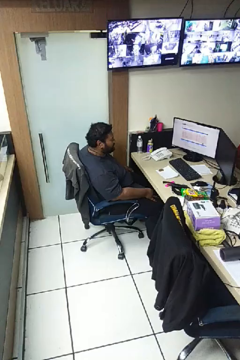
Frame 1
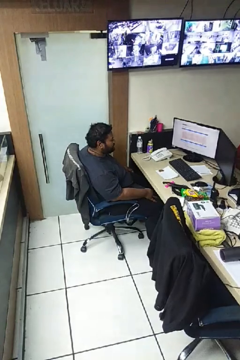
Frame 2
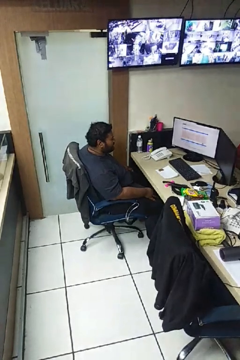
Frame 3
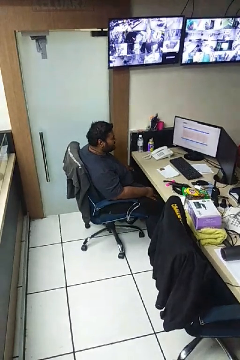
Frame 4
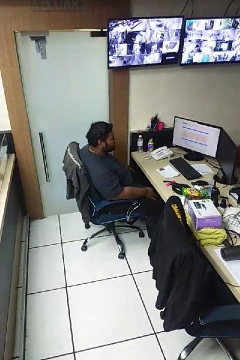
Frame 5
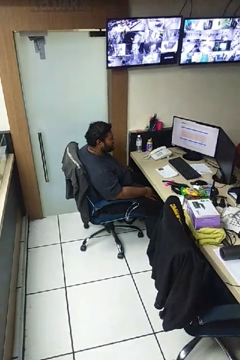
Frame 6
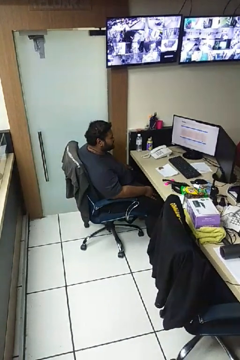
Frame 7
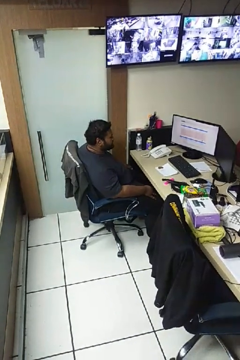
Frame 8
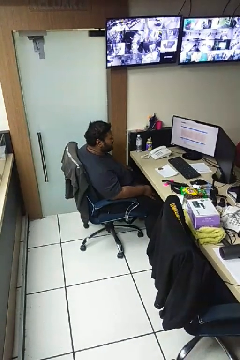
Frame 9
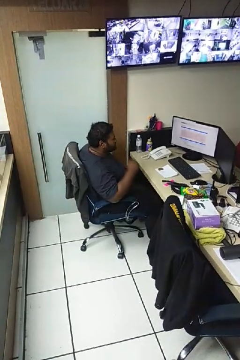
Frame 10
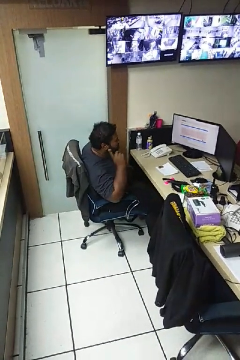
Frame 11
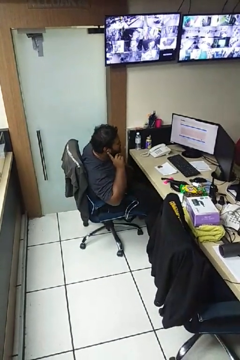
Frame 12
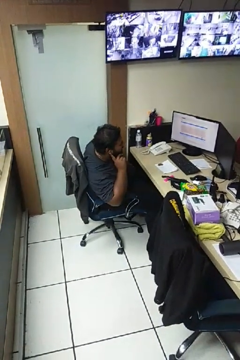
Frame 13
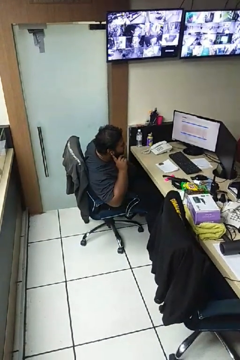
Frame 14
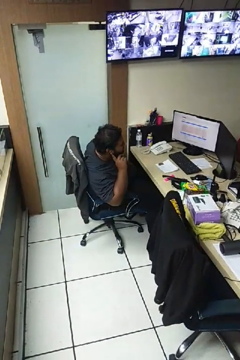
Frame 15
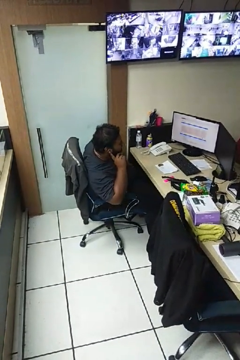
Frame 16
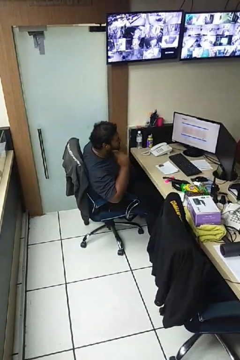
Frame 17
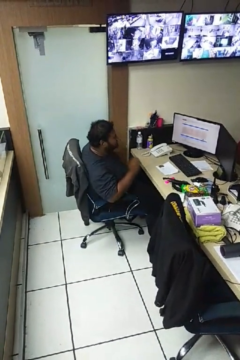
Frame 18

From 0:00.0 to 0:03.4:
person gestures listen closely

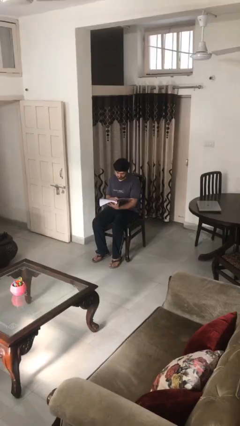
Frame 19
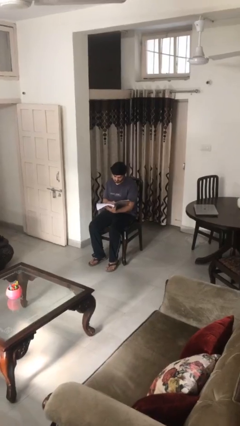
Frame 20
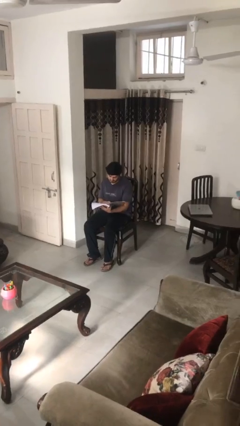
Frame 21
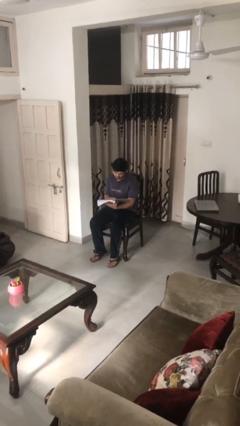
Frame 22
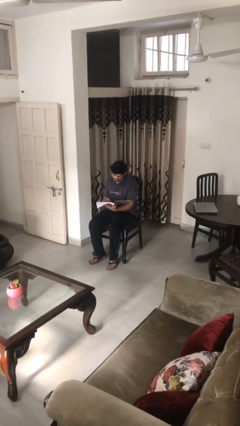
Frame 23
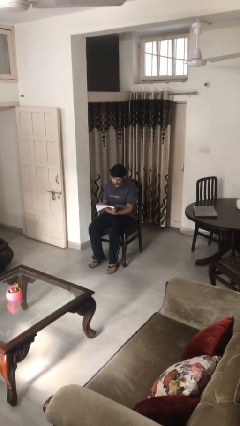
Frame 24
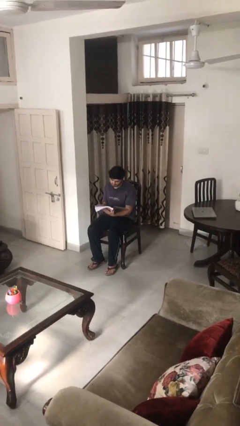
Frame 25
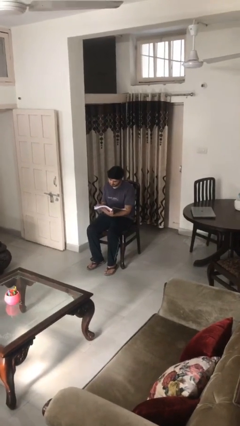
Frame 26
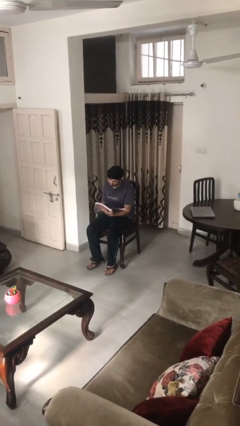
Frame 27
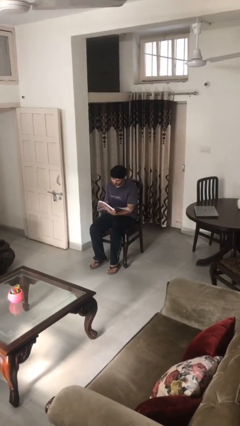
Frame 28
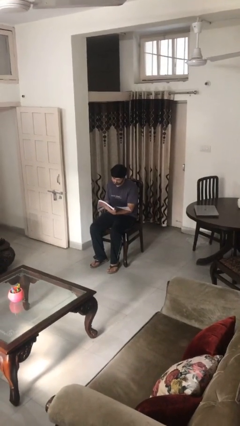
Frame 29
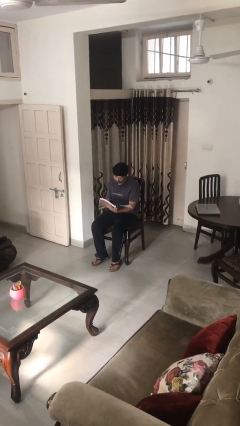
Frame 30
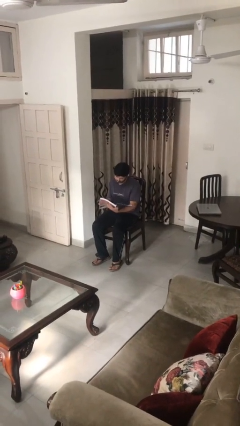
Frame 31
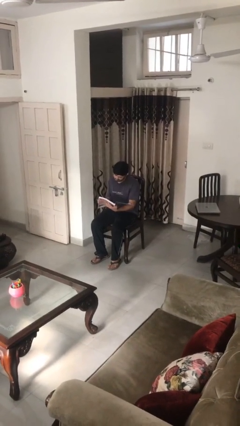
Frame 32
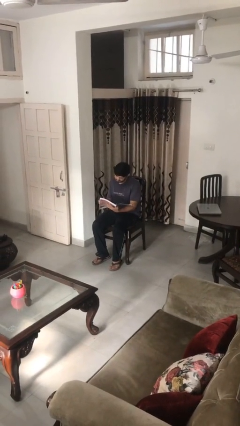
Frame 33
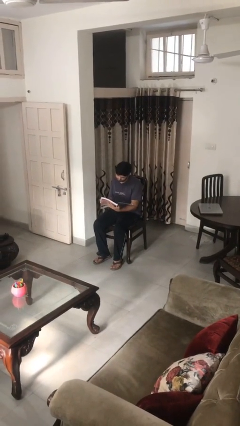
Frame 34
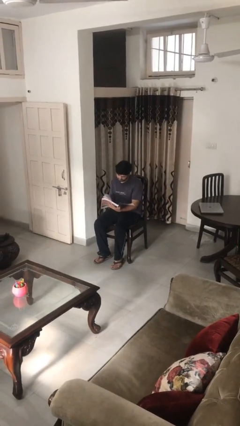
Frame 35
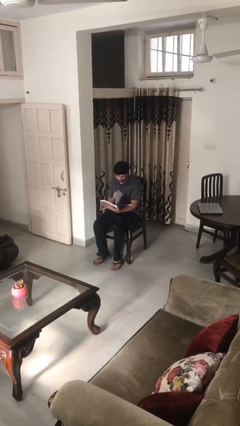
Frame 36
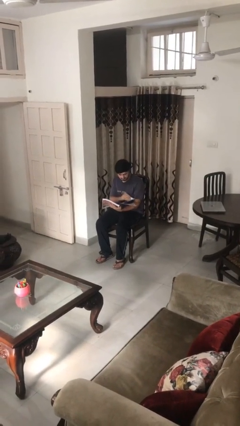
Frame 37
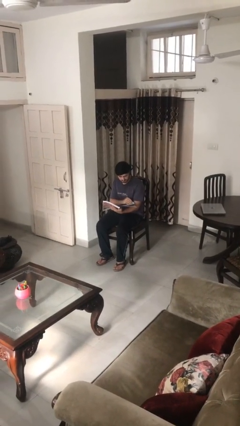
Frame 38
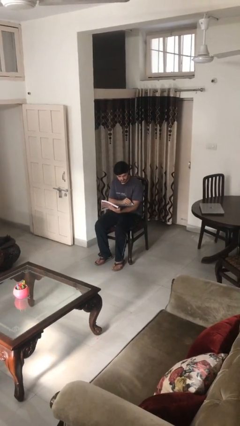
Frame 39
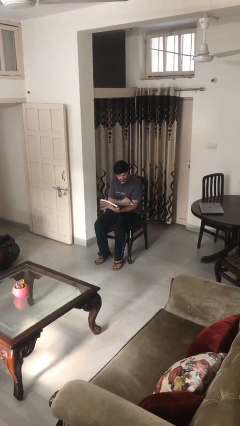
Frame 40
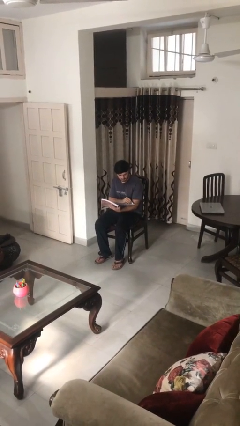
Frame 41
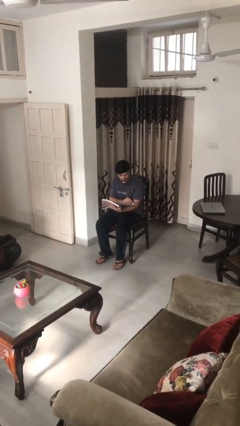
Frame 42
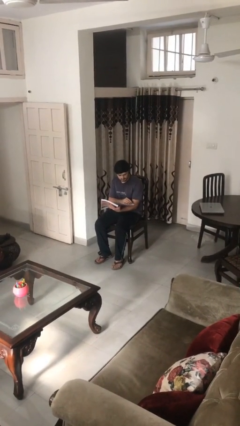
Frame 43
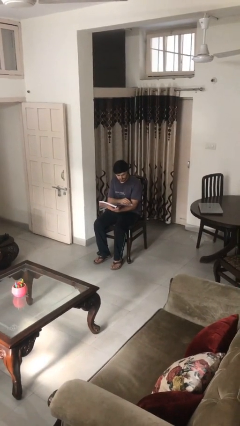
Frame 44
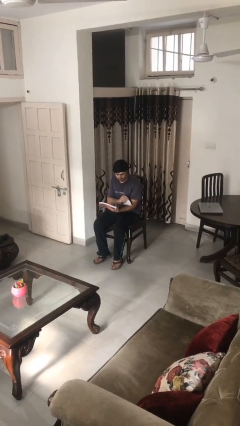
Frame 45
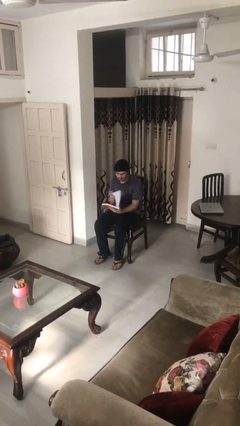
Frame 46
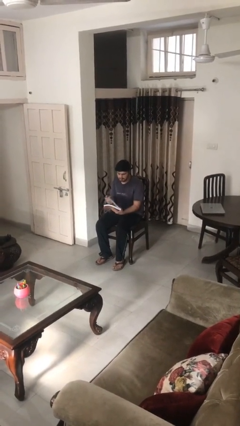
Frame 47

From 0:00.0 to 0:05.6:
person reads document

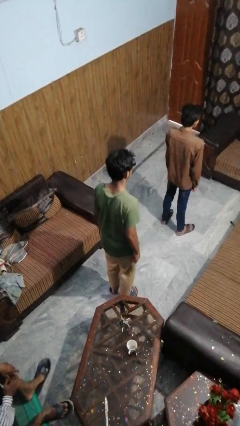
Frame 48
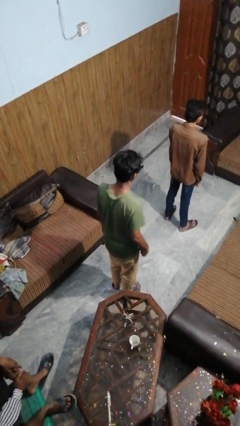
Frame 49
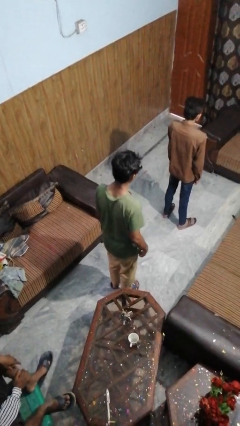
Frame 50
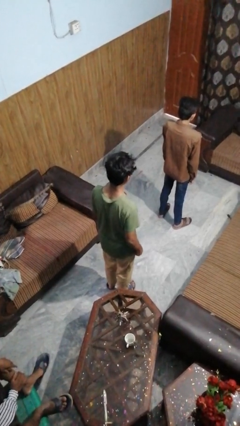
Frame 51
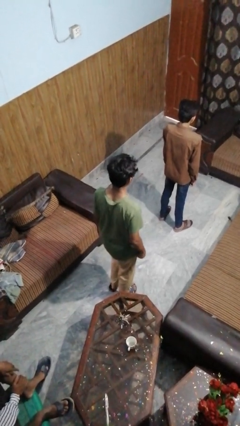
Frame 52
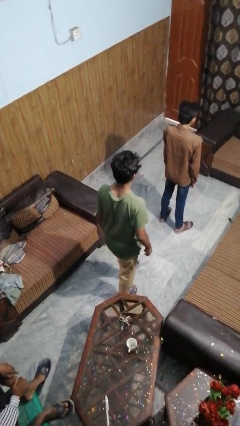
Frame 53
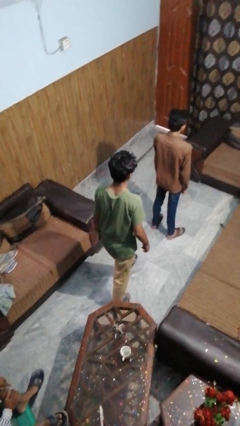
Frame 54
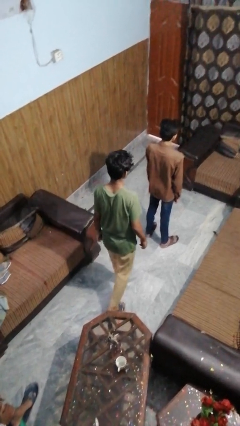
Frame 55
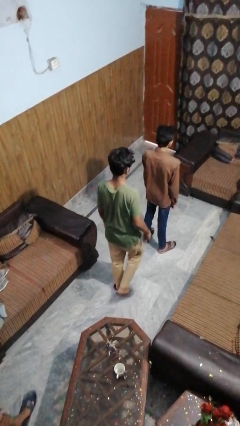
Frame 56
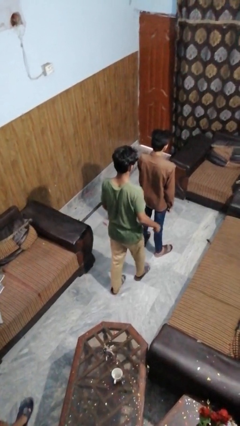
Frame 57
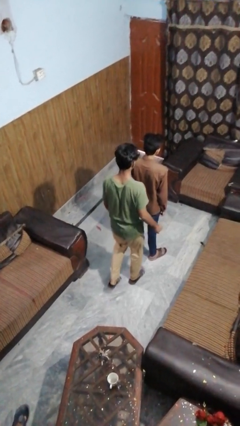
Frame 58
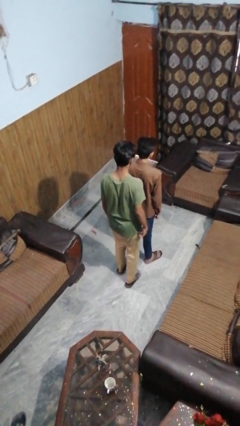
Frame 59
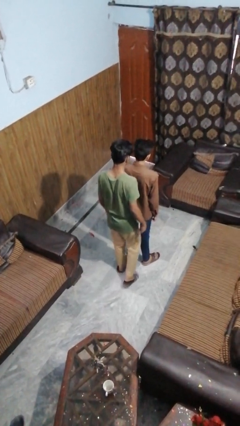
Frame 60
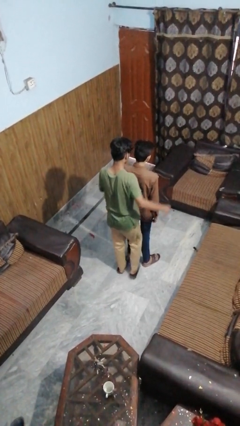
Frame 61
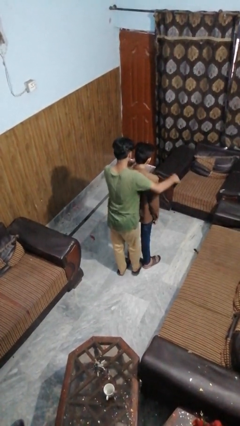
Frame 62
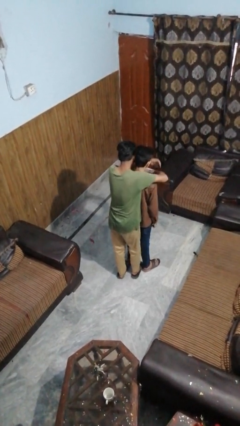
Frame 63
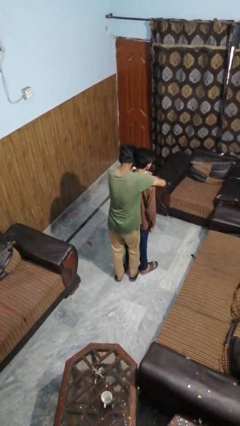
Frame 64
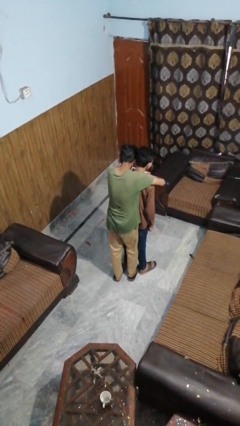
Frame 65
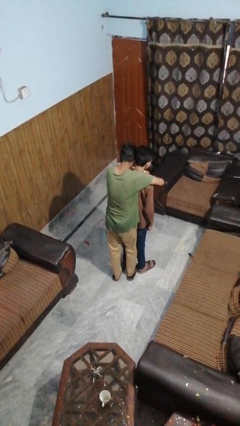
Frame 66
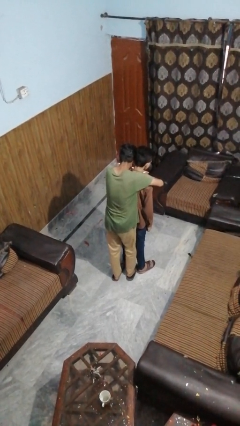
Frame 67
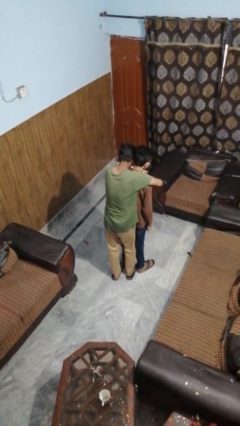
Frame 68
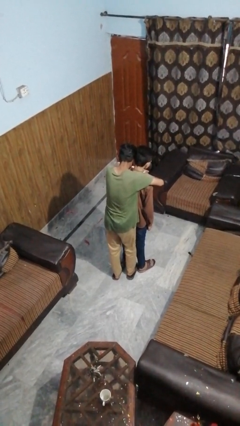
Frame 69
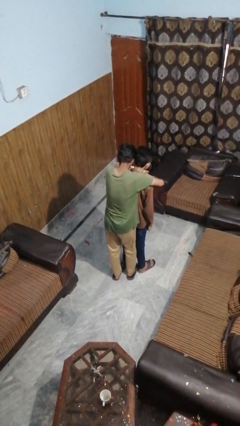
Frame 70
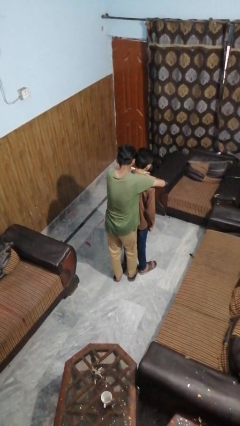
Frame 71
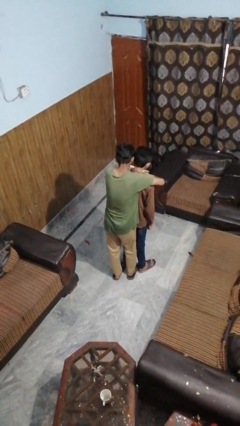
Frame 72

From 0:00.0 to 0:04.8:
person hugs person from behind

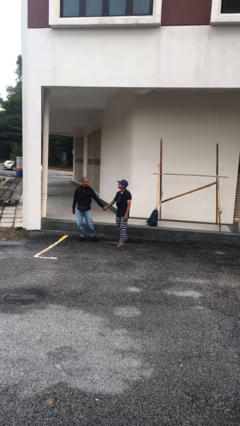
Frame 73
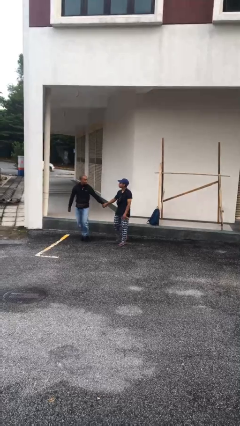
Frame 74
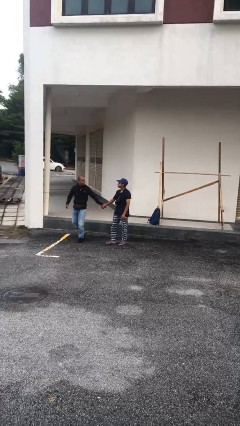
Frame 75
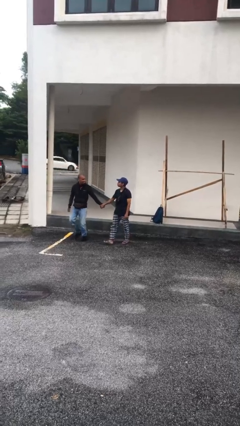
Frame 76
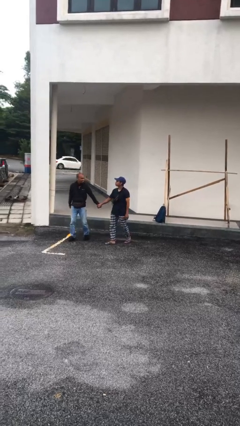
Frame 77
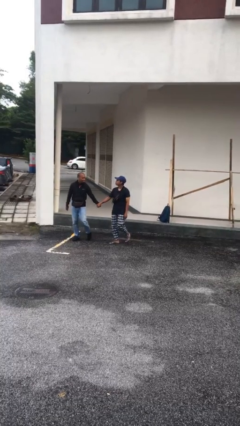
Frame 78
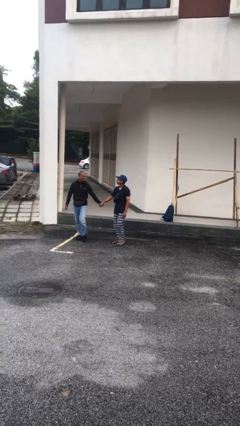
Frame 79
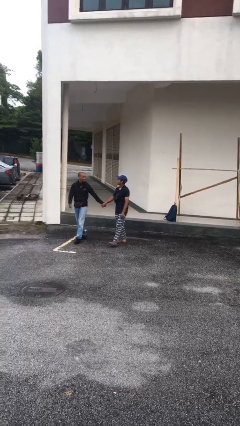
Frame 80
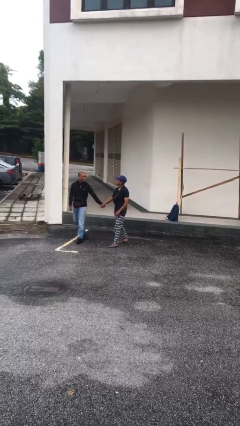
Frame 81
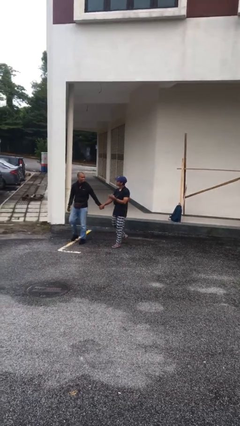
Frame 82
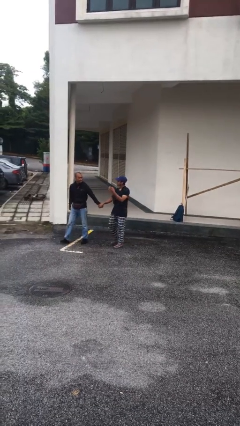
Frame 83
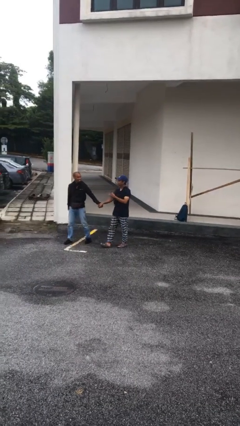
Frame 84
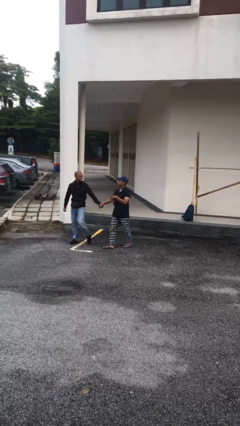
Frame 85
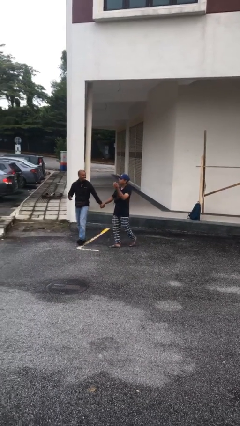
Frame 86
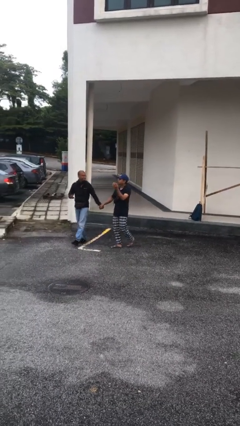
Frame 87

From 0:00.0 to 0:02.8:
person holds hand

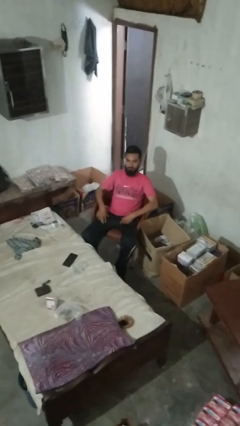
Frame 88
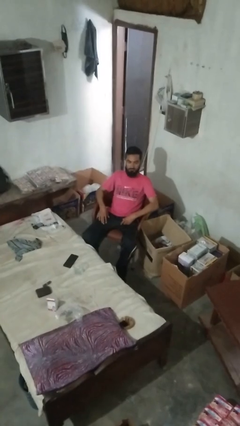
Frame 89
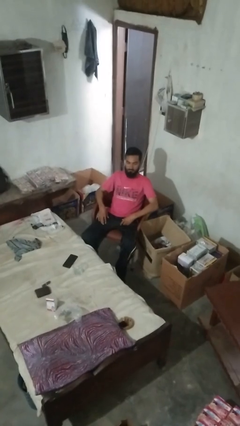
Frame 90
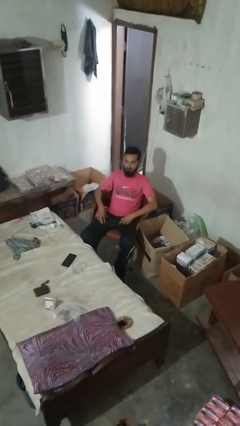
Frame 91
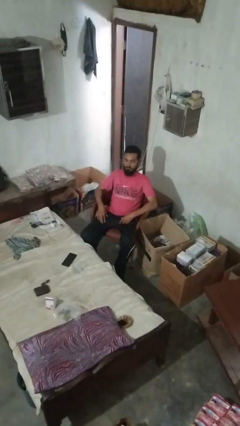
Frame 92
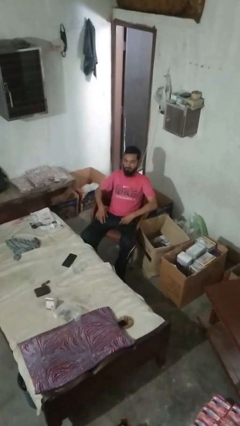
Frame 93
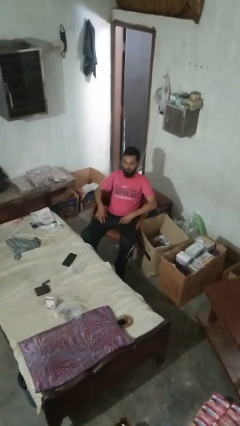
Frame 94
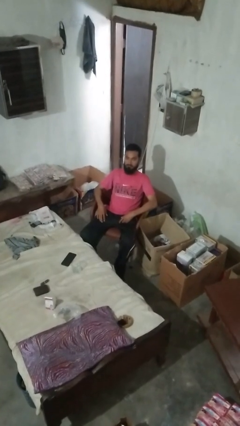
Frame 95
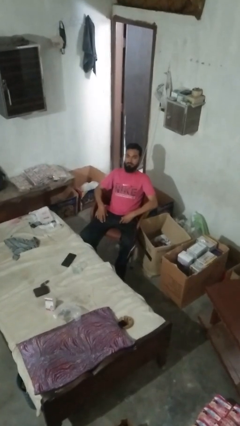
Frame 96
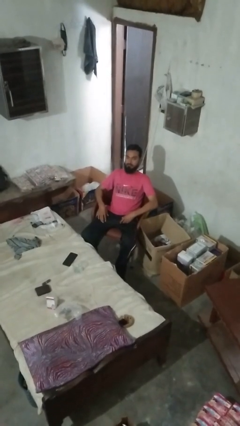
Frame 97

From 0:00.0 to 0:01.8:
person nods head
